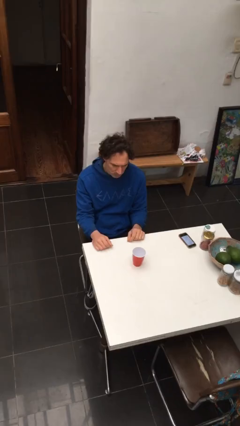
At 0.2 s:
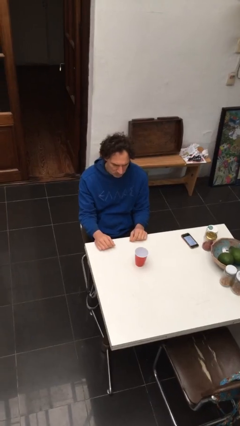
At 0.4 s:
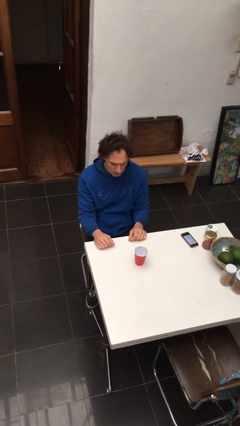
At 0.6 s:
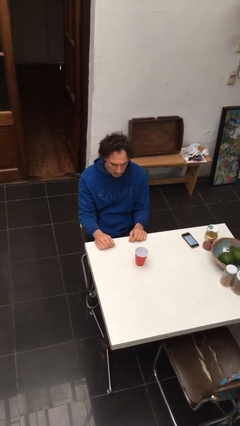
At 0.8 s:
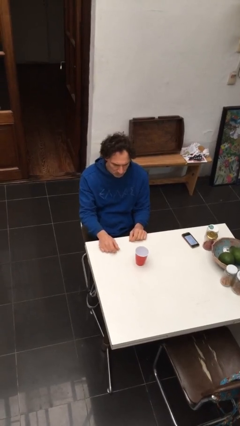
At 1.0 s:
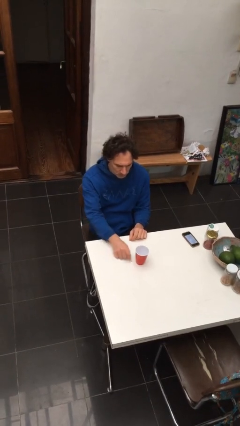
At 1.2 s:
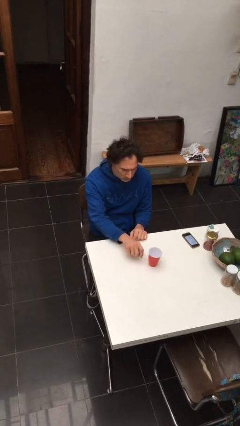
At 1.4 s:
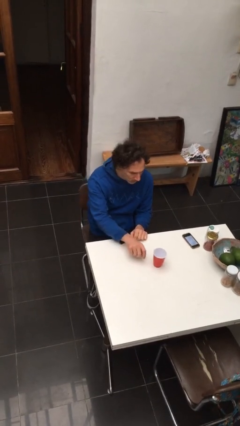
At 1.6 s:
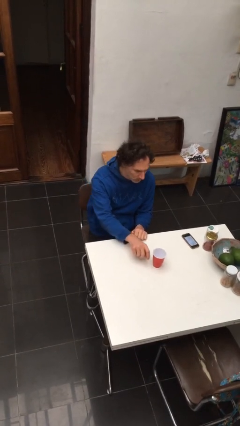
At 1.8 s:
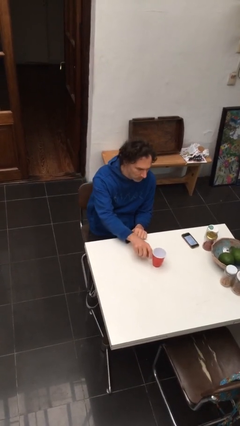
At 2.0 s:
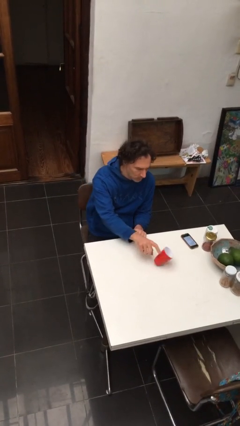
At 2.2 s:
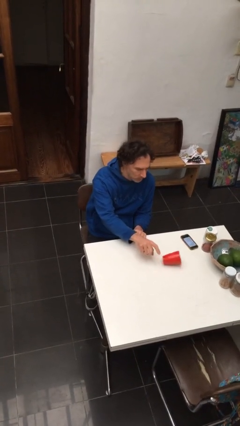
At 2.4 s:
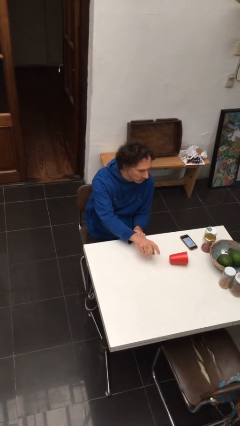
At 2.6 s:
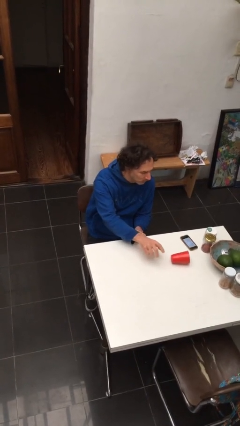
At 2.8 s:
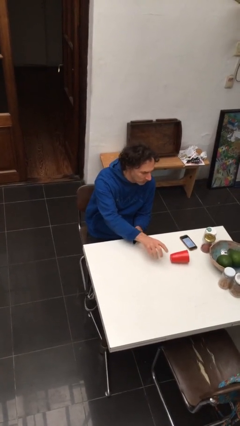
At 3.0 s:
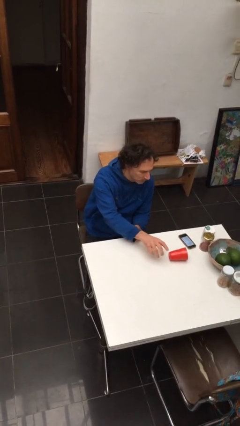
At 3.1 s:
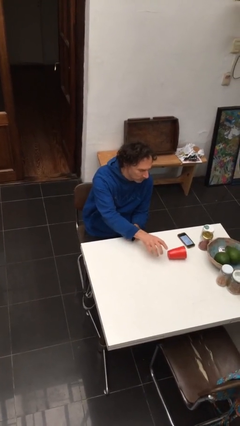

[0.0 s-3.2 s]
person knocks over glass

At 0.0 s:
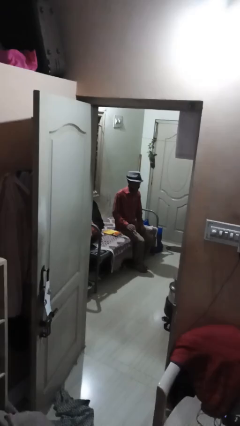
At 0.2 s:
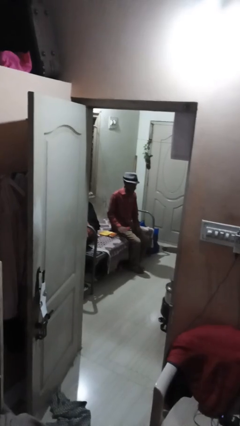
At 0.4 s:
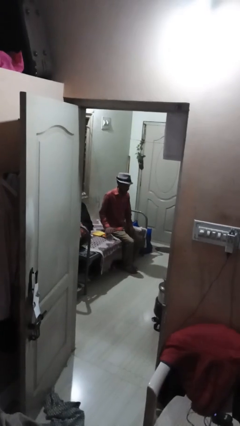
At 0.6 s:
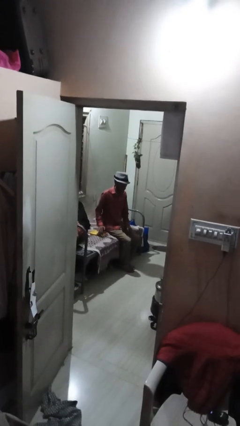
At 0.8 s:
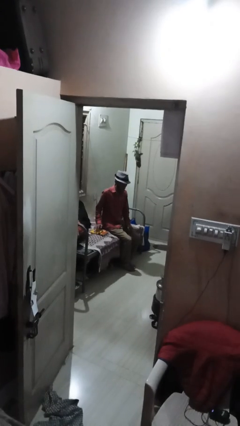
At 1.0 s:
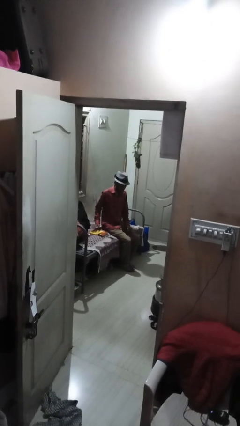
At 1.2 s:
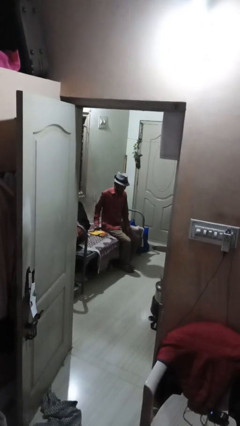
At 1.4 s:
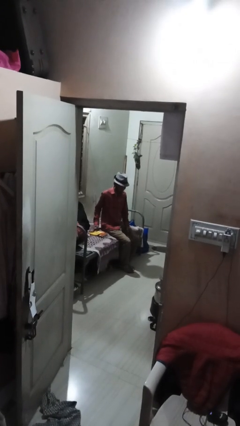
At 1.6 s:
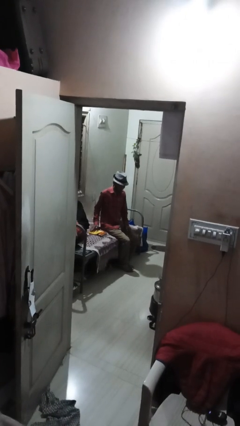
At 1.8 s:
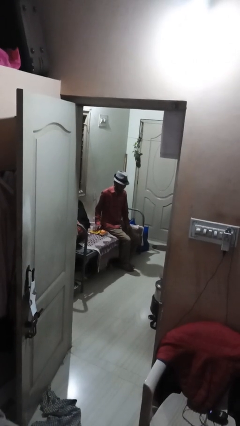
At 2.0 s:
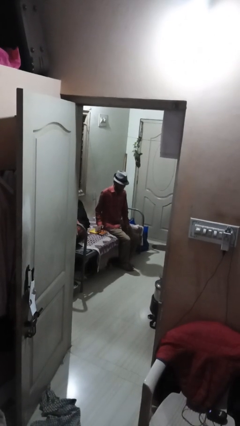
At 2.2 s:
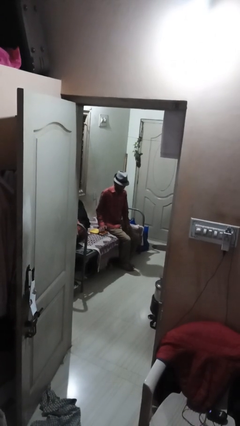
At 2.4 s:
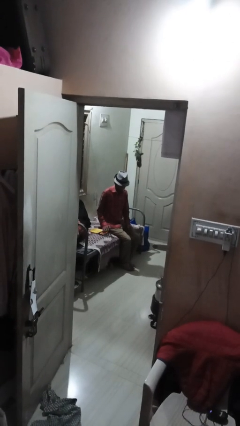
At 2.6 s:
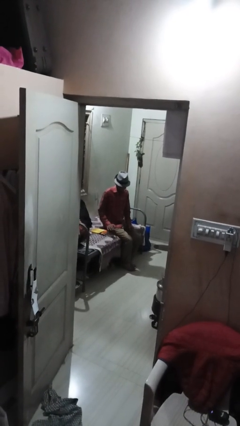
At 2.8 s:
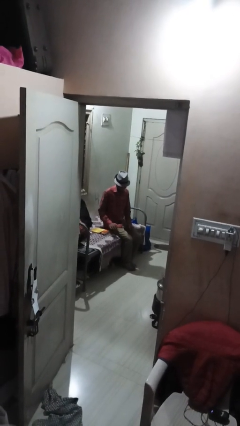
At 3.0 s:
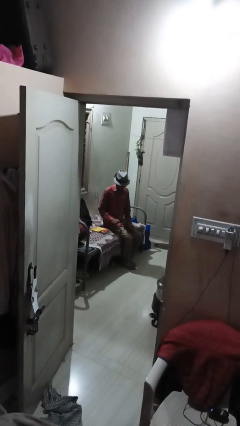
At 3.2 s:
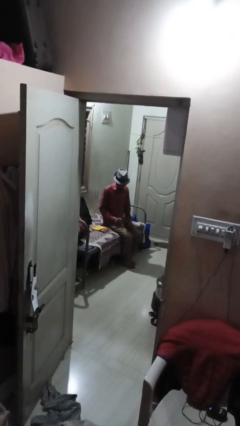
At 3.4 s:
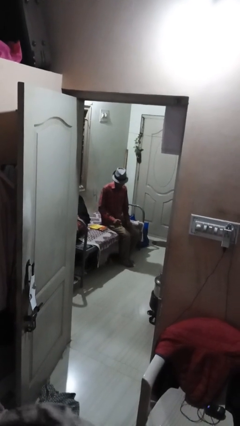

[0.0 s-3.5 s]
person waves hand over object

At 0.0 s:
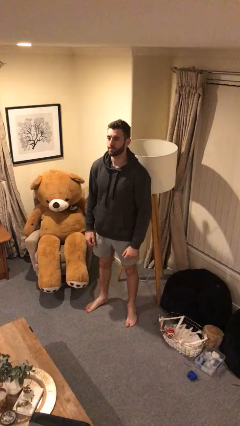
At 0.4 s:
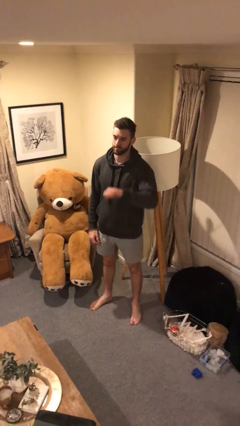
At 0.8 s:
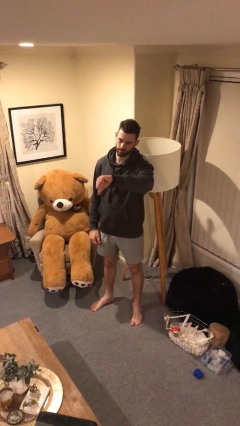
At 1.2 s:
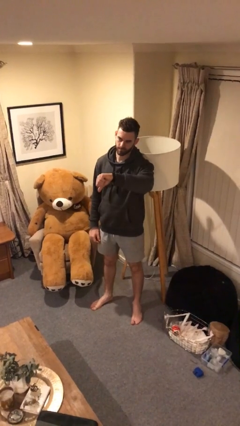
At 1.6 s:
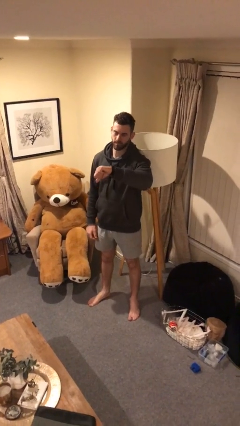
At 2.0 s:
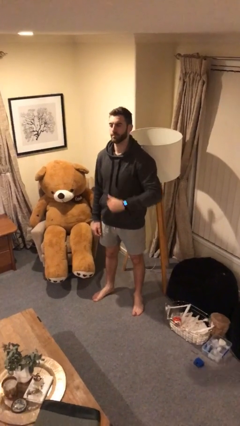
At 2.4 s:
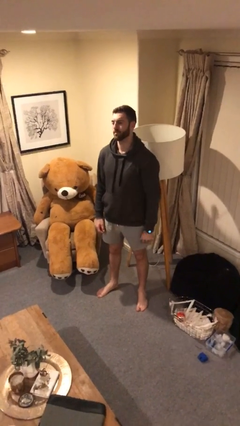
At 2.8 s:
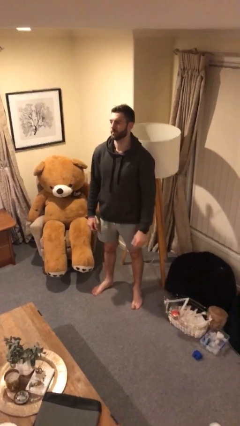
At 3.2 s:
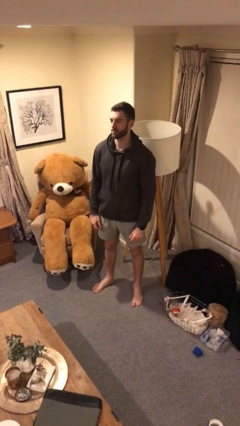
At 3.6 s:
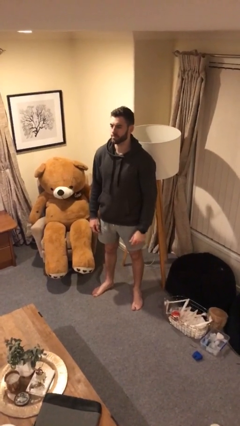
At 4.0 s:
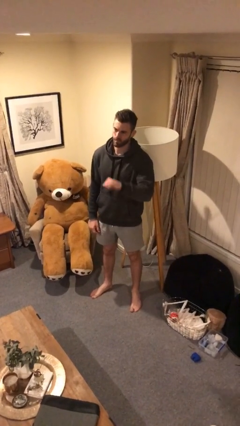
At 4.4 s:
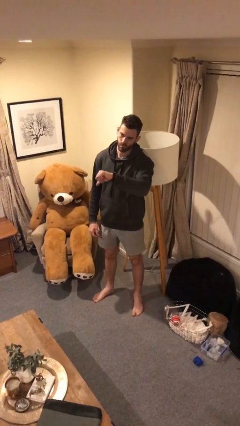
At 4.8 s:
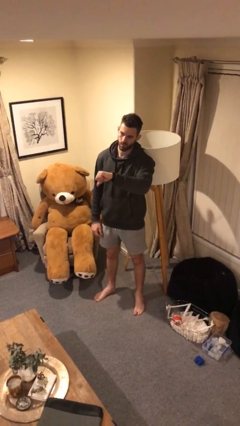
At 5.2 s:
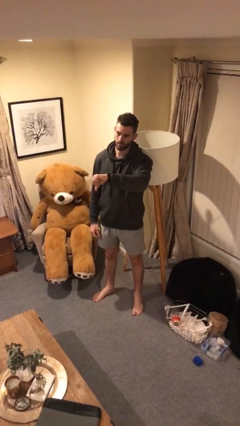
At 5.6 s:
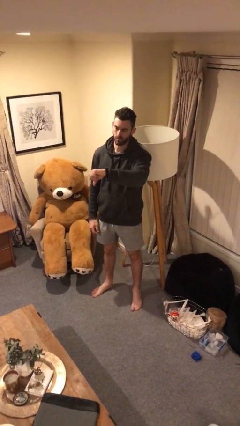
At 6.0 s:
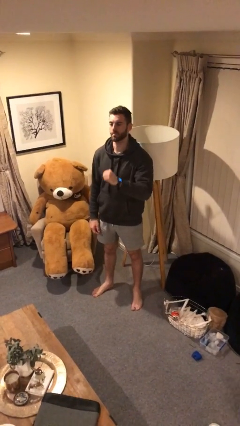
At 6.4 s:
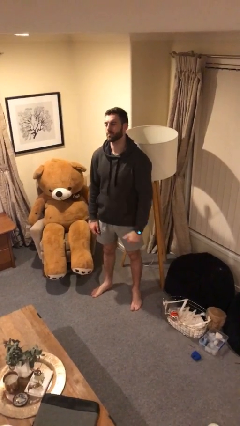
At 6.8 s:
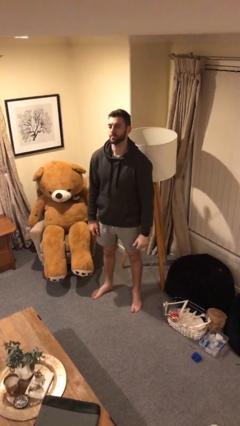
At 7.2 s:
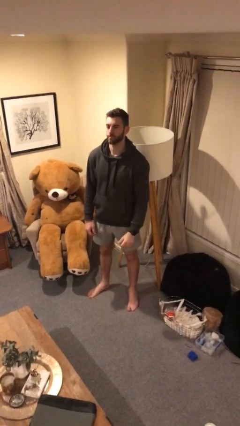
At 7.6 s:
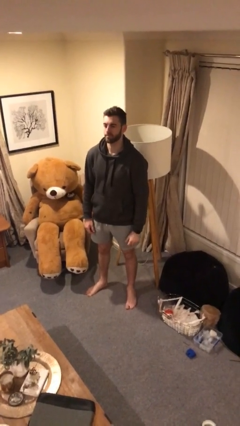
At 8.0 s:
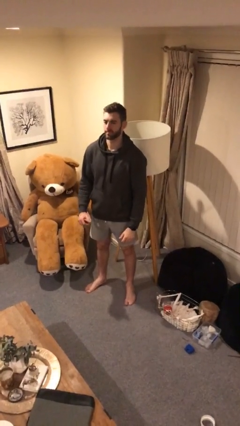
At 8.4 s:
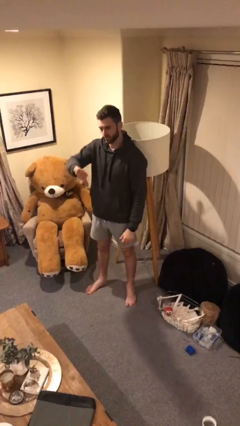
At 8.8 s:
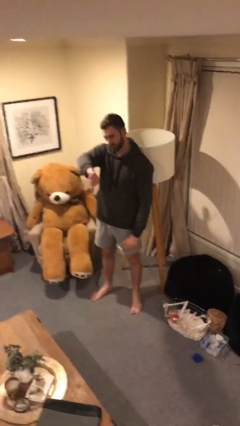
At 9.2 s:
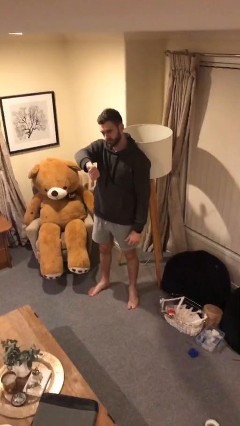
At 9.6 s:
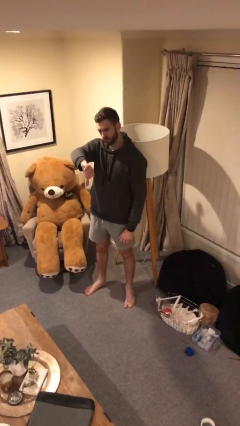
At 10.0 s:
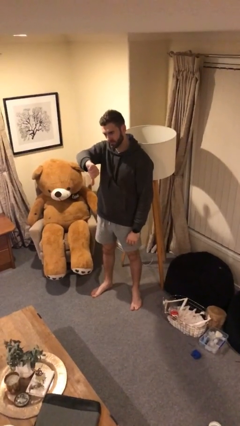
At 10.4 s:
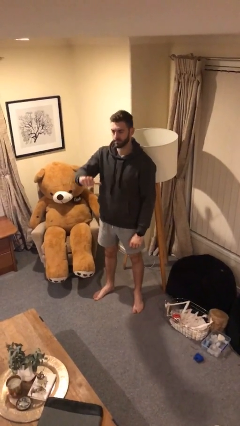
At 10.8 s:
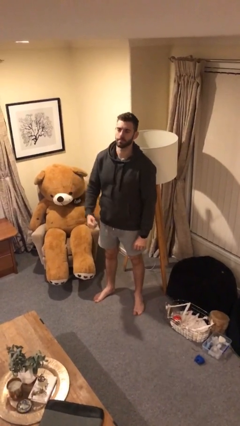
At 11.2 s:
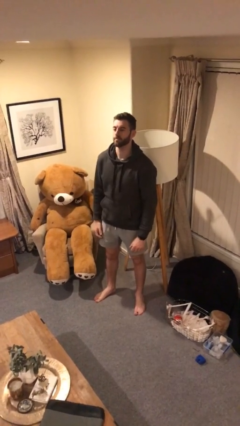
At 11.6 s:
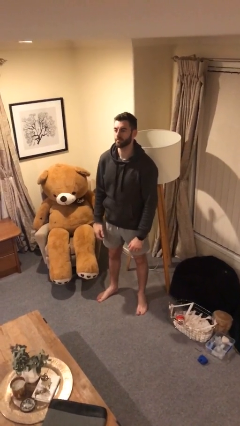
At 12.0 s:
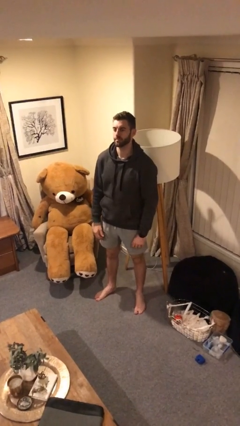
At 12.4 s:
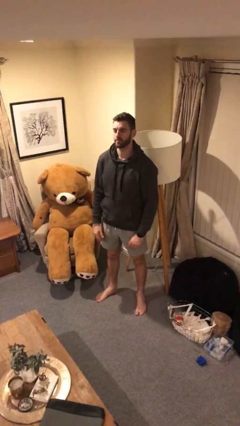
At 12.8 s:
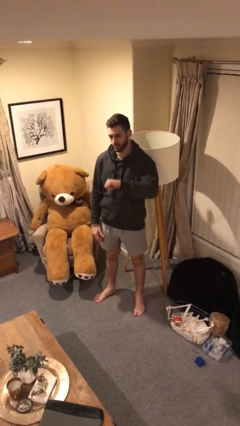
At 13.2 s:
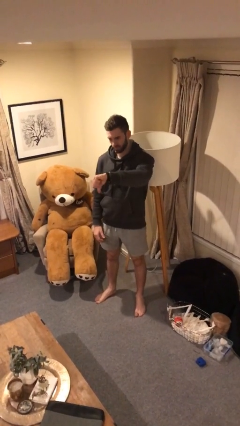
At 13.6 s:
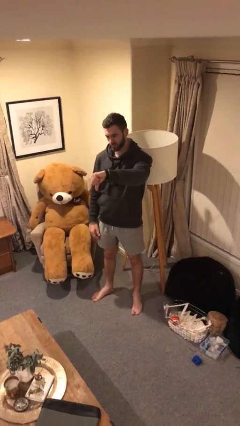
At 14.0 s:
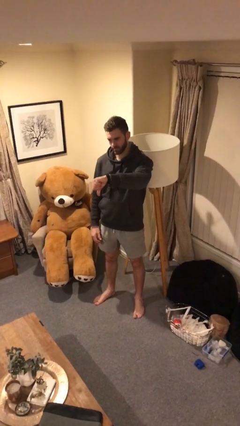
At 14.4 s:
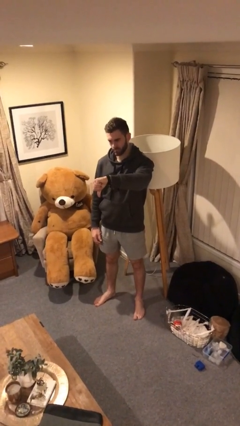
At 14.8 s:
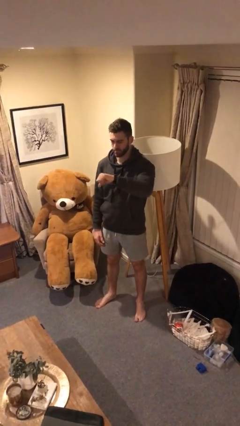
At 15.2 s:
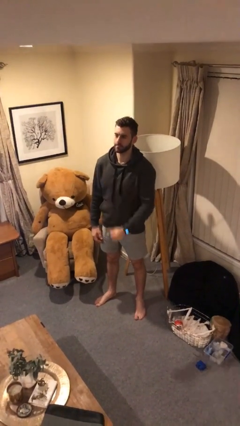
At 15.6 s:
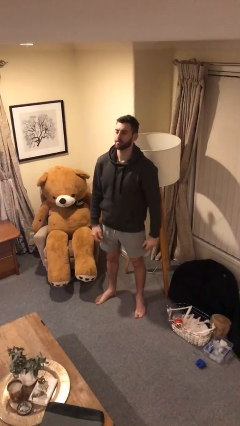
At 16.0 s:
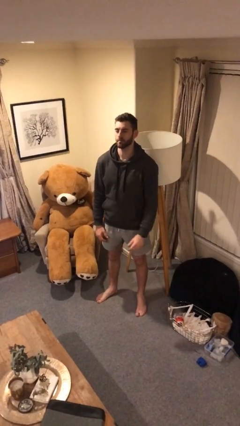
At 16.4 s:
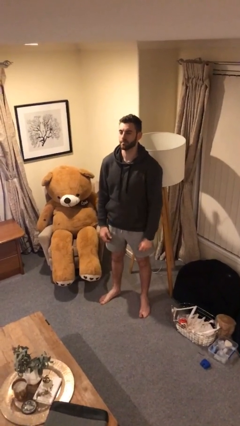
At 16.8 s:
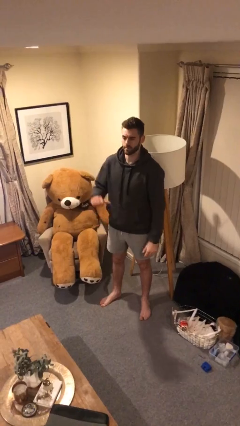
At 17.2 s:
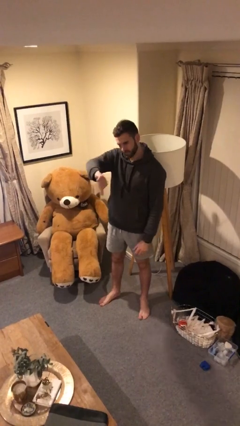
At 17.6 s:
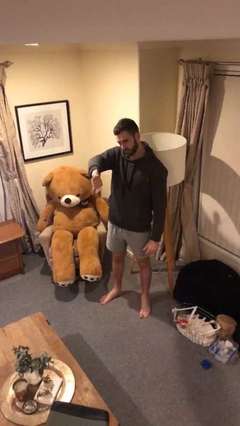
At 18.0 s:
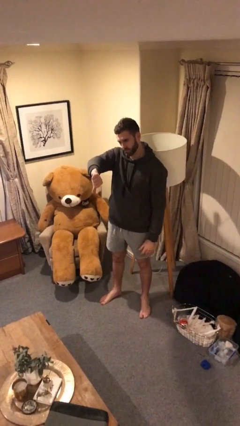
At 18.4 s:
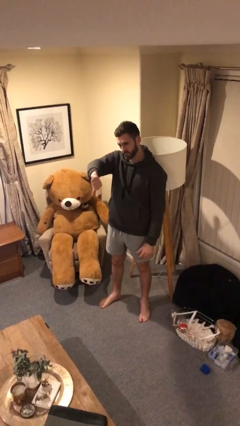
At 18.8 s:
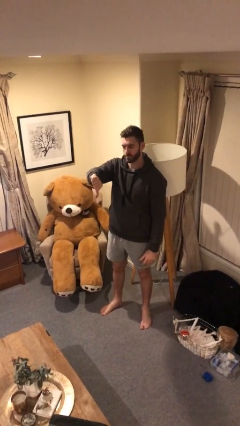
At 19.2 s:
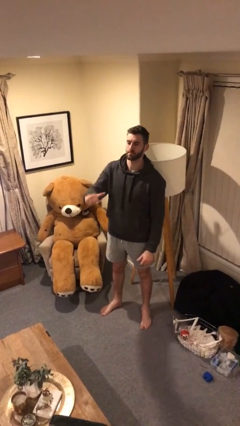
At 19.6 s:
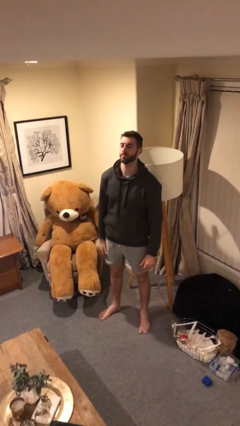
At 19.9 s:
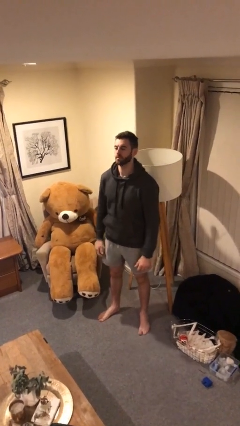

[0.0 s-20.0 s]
person gestures thumbs down

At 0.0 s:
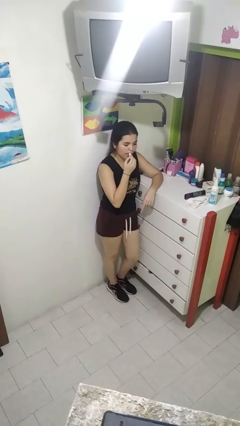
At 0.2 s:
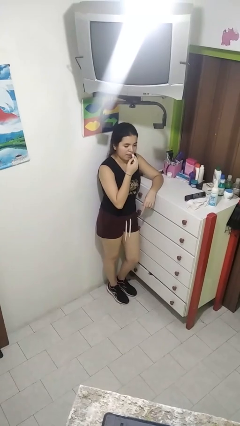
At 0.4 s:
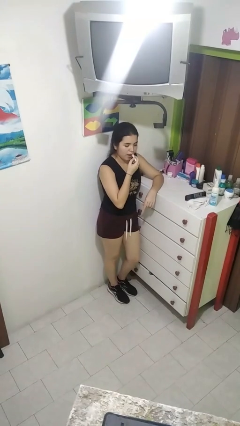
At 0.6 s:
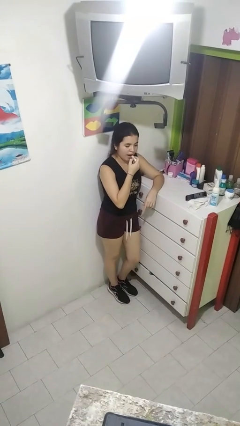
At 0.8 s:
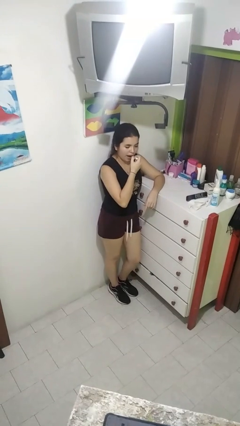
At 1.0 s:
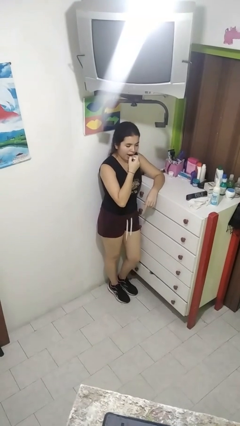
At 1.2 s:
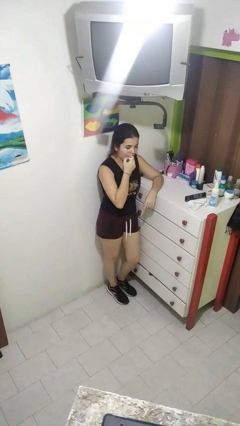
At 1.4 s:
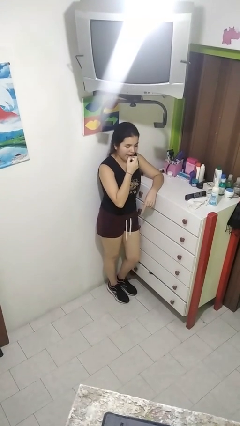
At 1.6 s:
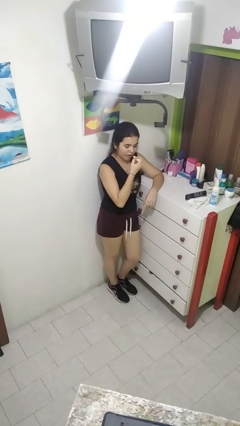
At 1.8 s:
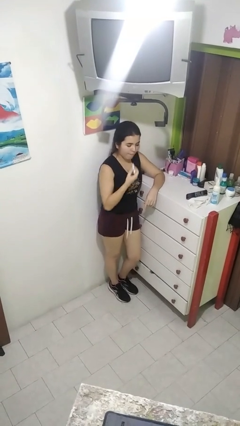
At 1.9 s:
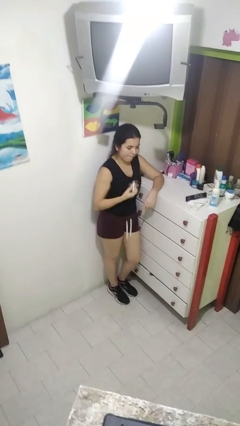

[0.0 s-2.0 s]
person applies lip makeup
